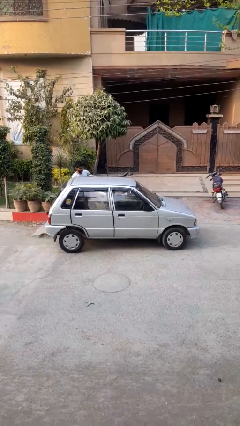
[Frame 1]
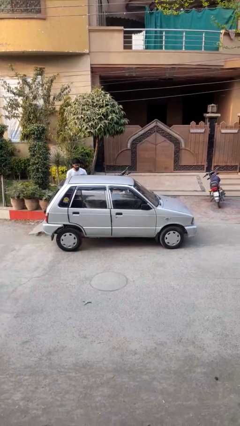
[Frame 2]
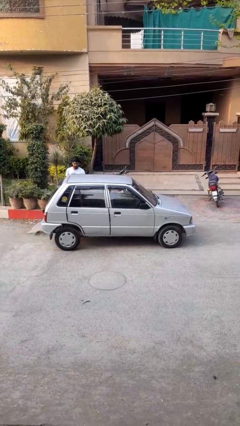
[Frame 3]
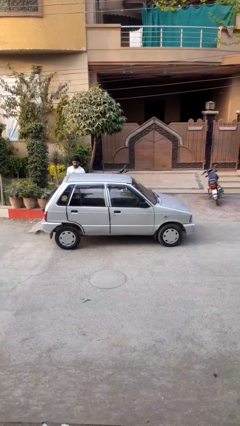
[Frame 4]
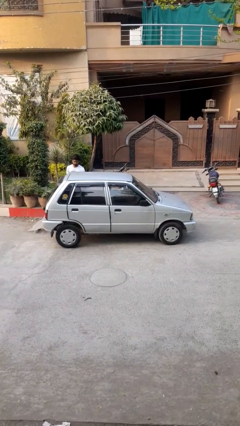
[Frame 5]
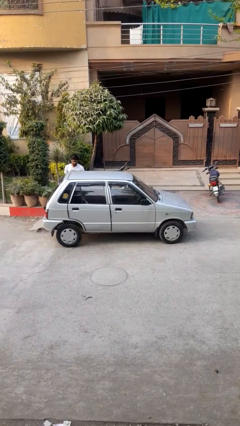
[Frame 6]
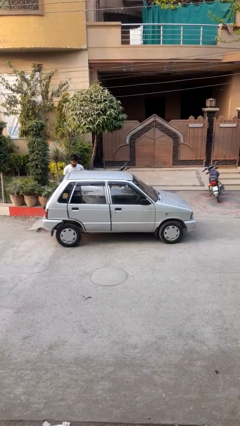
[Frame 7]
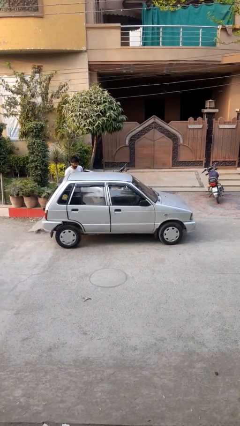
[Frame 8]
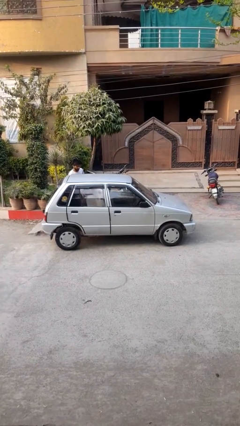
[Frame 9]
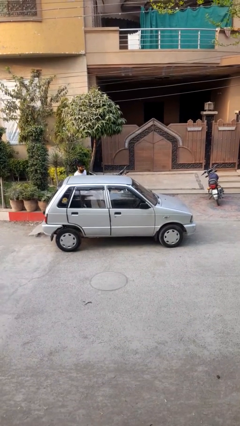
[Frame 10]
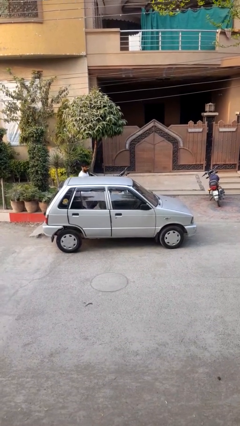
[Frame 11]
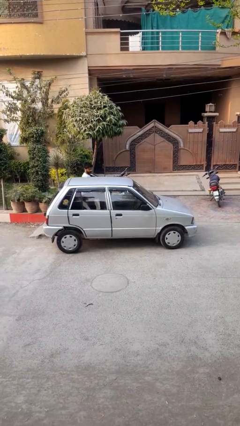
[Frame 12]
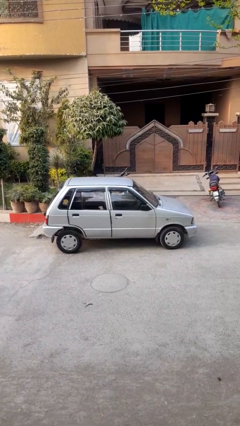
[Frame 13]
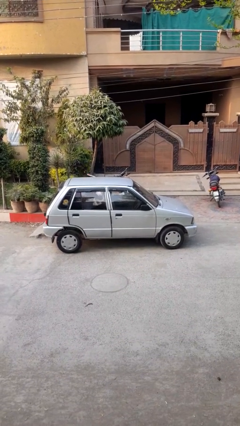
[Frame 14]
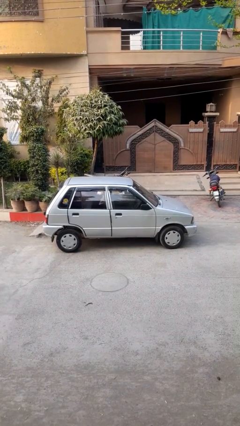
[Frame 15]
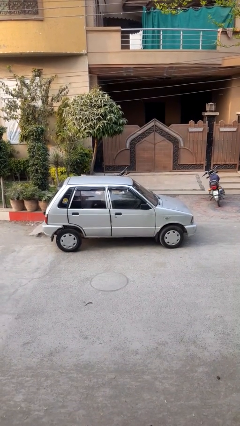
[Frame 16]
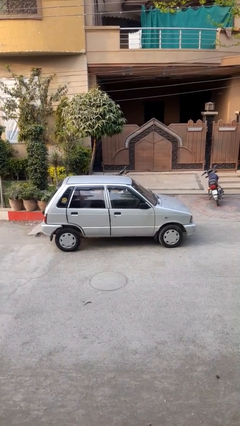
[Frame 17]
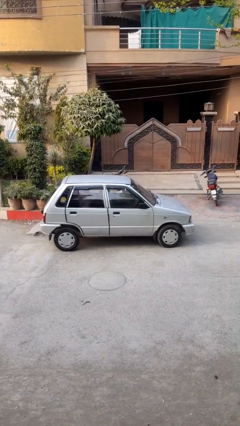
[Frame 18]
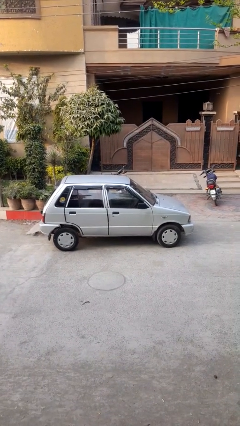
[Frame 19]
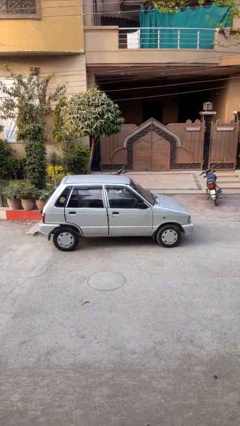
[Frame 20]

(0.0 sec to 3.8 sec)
car picks up person

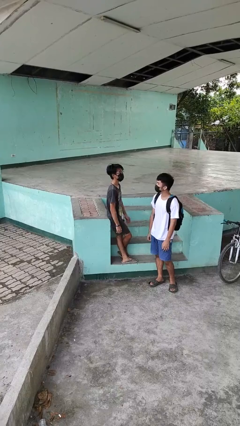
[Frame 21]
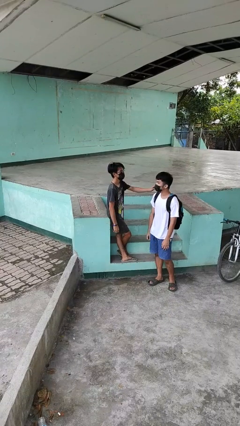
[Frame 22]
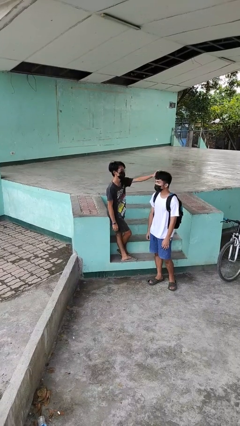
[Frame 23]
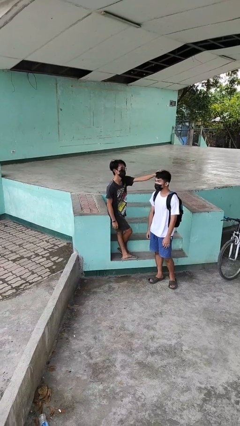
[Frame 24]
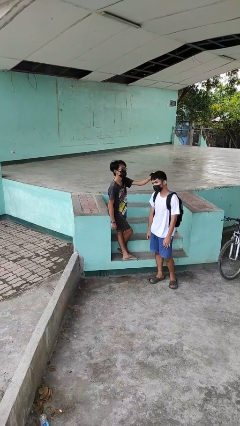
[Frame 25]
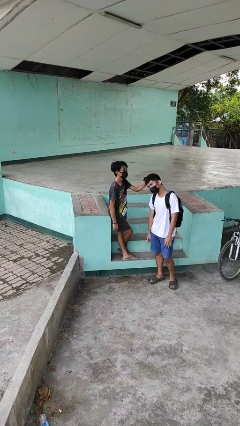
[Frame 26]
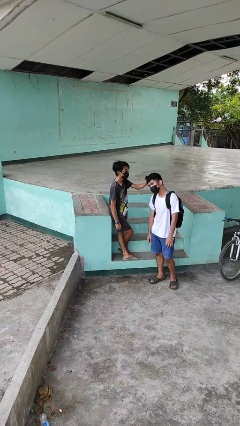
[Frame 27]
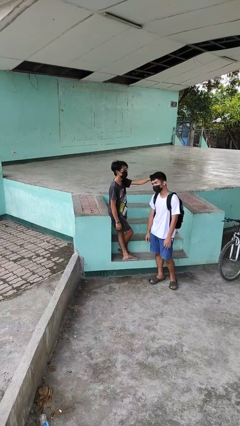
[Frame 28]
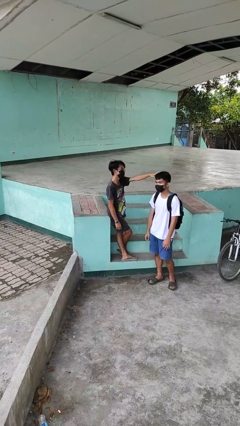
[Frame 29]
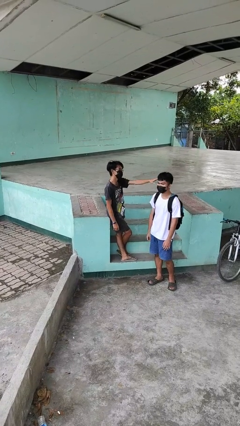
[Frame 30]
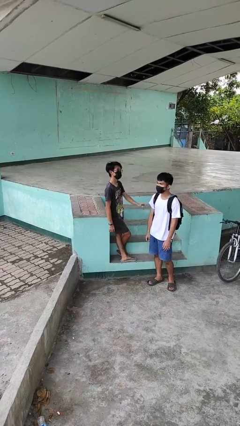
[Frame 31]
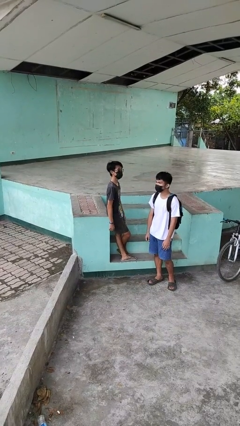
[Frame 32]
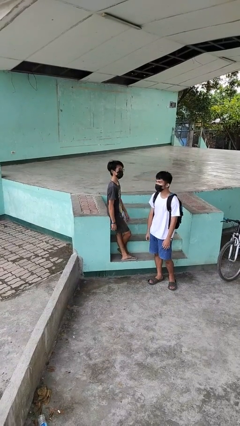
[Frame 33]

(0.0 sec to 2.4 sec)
person grabs person by hair

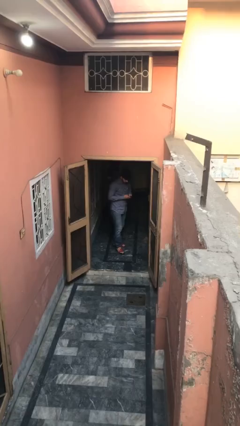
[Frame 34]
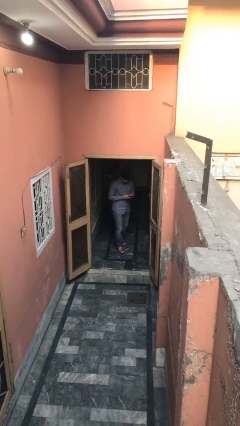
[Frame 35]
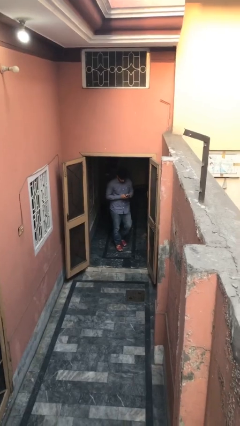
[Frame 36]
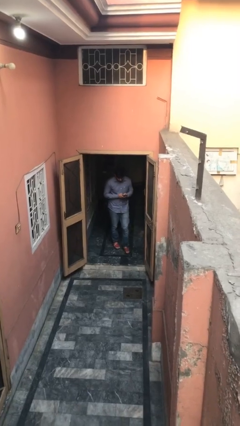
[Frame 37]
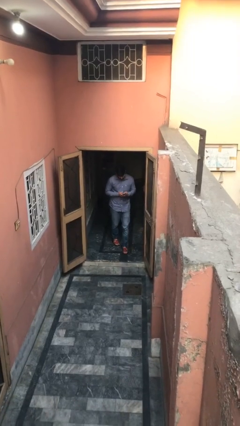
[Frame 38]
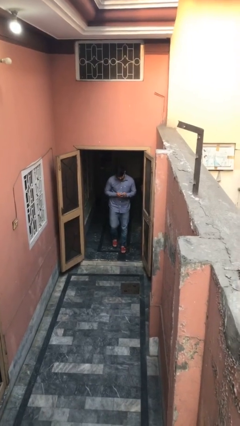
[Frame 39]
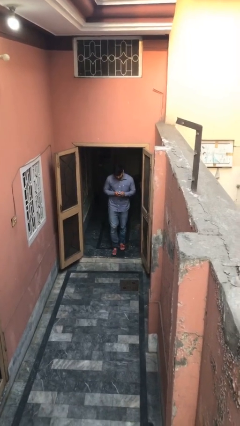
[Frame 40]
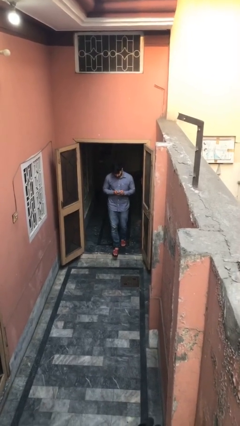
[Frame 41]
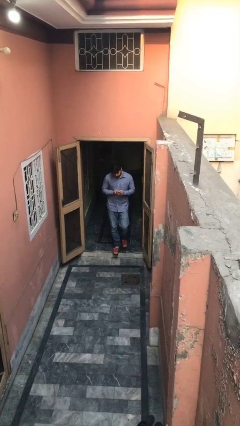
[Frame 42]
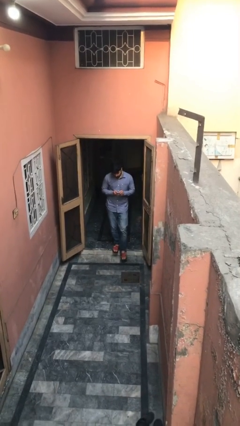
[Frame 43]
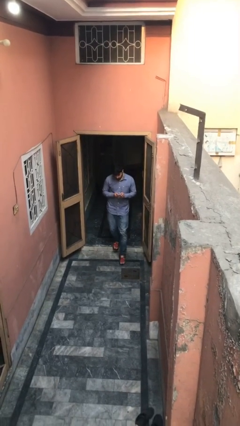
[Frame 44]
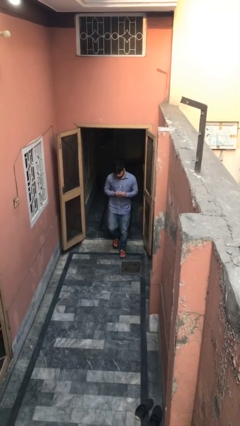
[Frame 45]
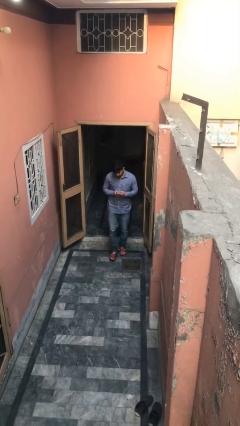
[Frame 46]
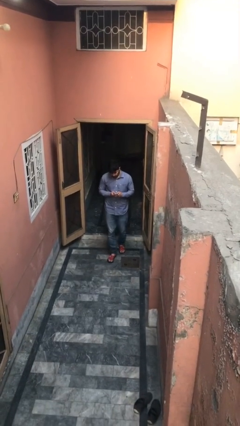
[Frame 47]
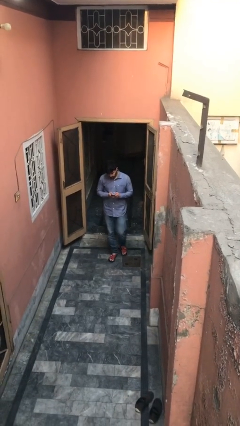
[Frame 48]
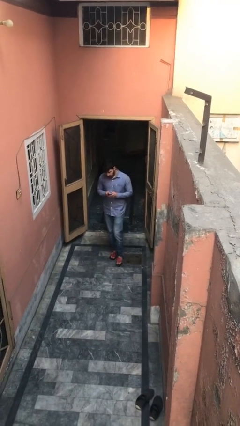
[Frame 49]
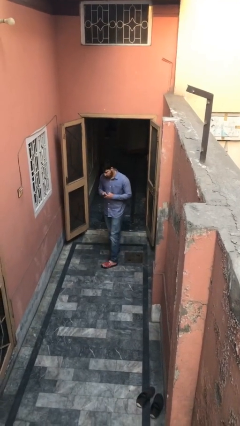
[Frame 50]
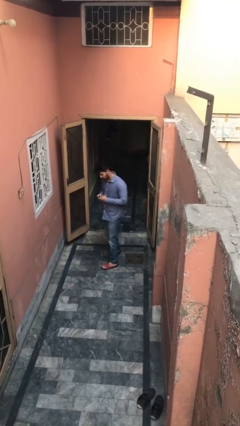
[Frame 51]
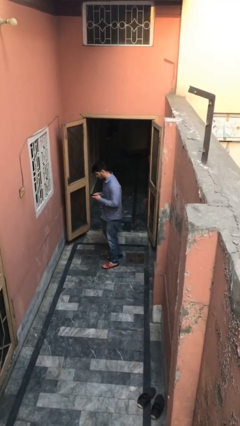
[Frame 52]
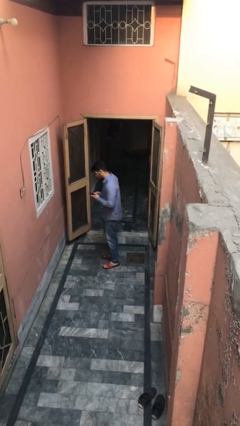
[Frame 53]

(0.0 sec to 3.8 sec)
person enters scene through structure

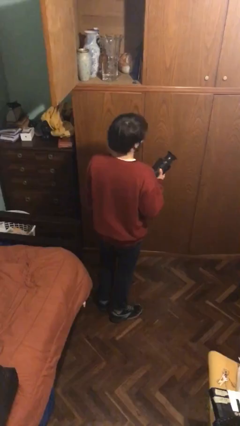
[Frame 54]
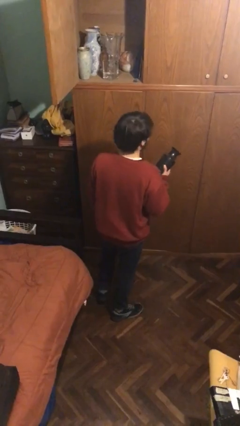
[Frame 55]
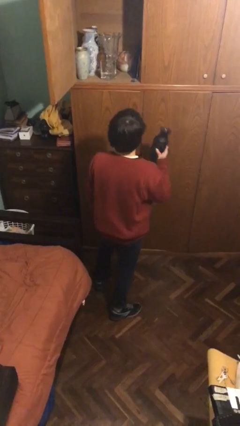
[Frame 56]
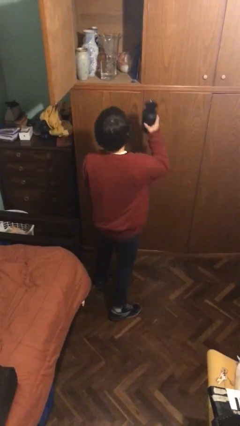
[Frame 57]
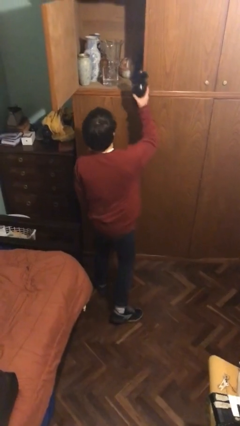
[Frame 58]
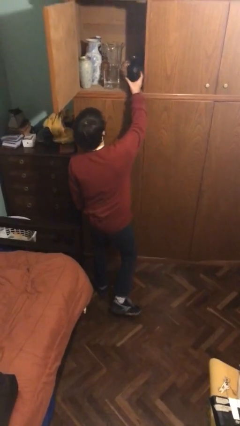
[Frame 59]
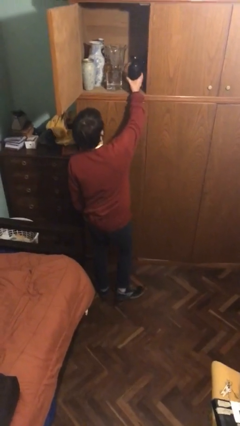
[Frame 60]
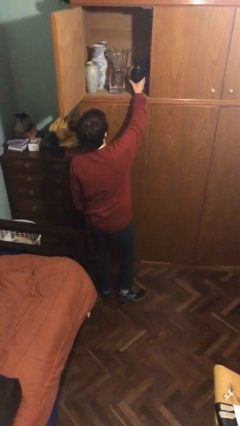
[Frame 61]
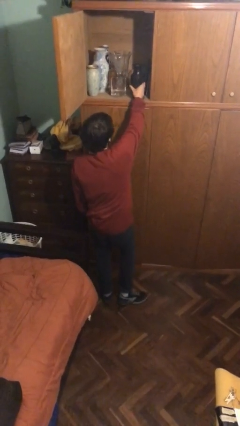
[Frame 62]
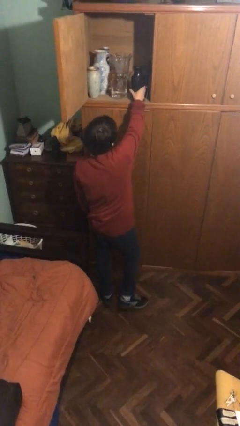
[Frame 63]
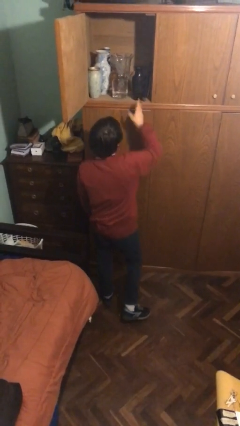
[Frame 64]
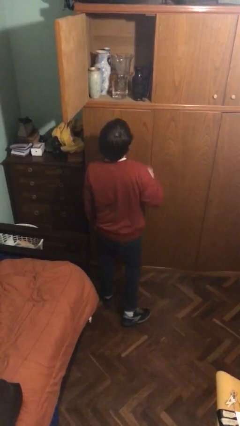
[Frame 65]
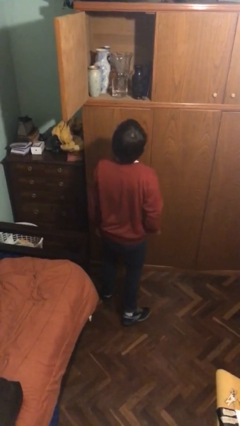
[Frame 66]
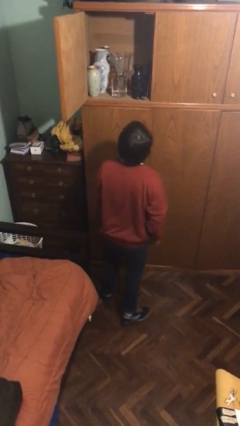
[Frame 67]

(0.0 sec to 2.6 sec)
person puts down object into cabinet

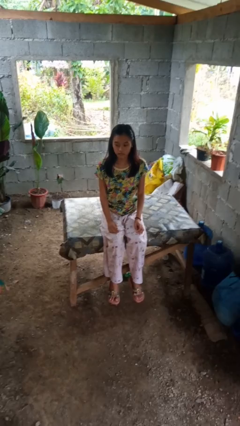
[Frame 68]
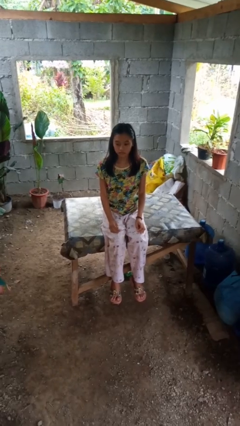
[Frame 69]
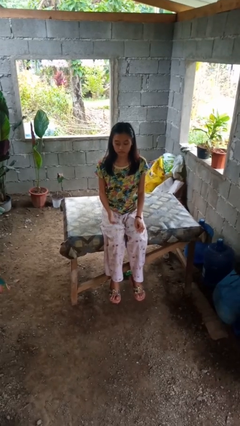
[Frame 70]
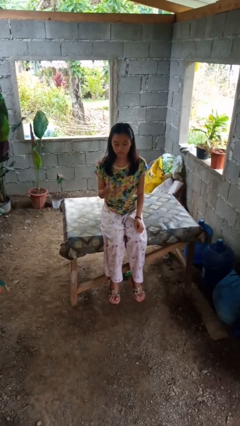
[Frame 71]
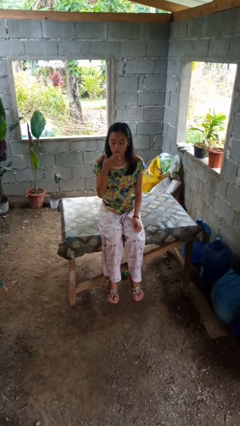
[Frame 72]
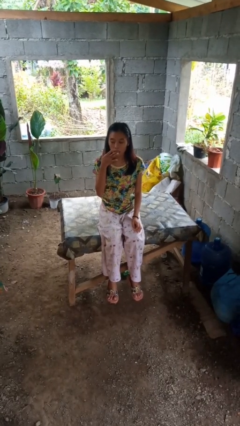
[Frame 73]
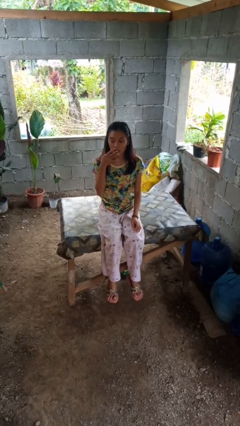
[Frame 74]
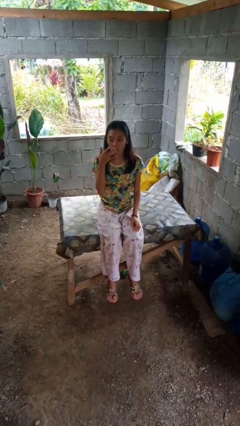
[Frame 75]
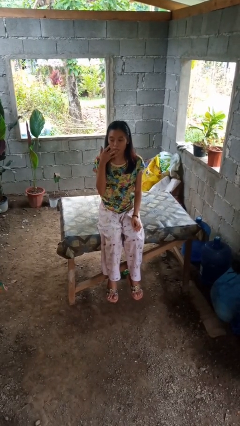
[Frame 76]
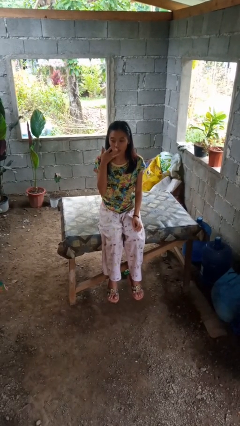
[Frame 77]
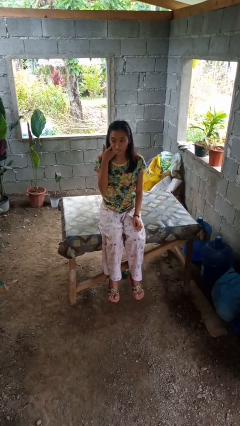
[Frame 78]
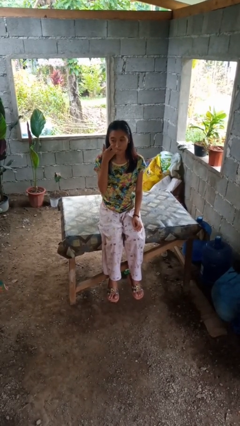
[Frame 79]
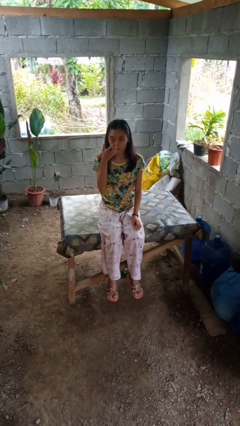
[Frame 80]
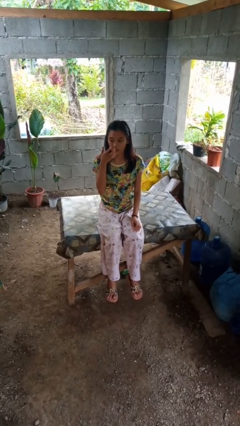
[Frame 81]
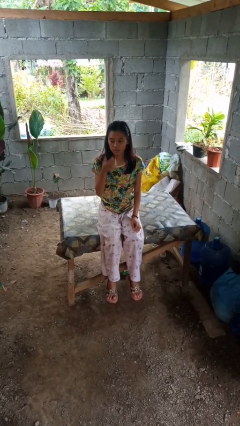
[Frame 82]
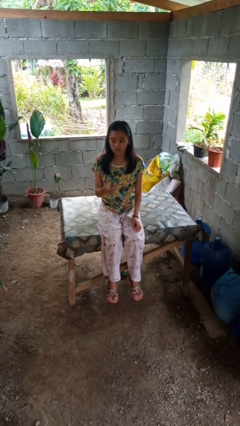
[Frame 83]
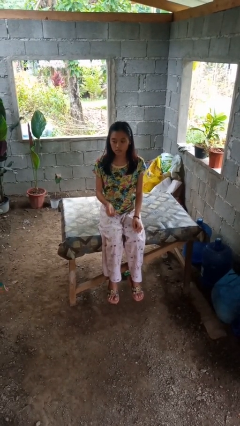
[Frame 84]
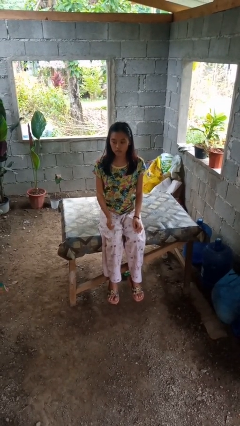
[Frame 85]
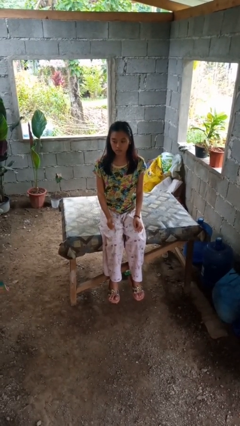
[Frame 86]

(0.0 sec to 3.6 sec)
person licks fingers

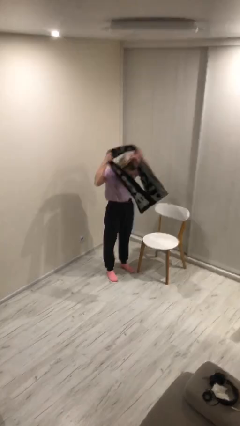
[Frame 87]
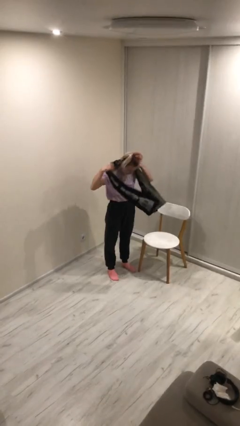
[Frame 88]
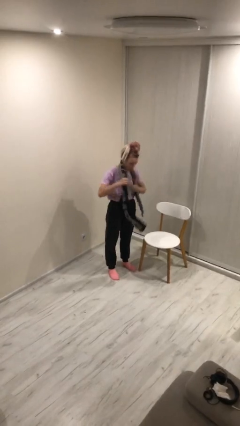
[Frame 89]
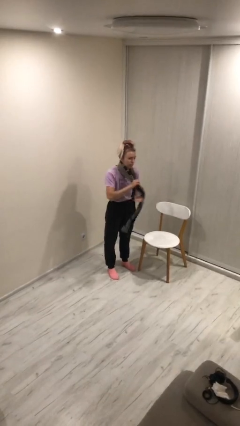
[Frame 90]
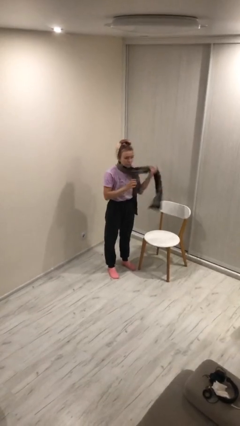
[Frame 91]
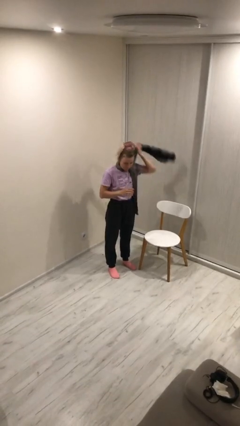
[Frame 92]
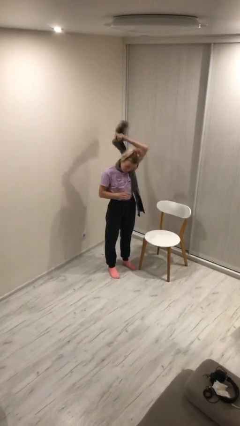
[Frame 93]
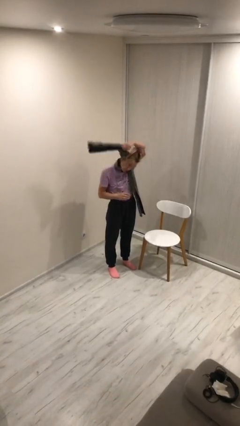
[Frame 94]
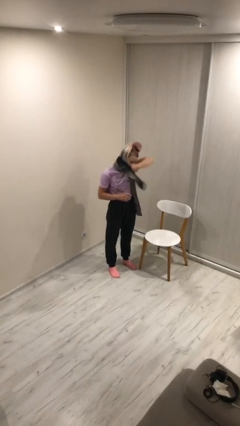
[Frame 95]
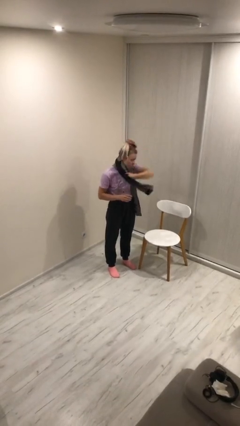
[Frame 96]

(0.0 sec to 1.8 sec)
person puts on scarf
